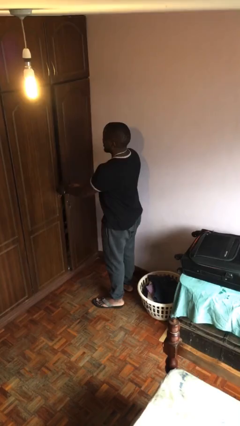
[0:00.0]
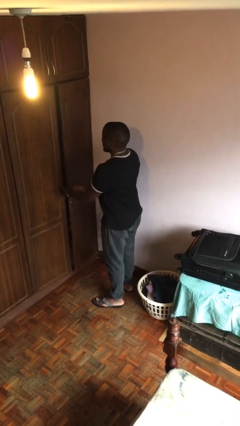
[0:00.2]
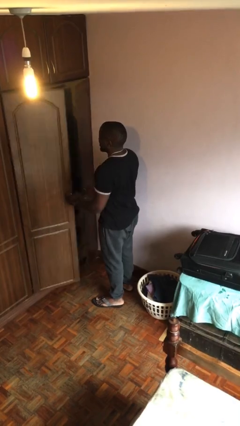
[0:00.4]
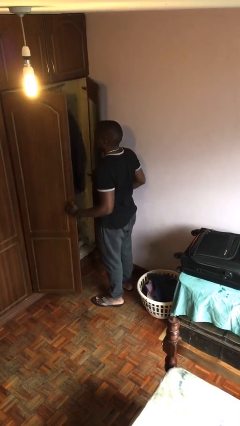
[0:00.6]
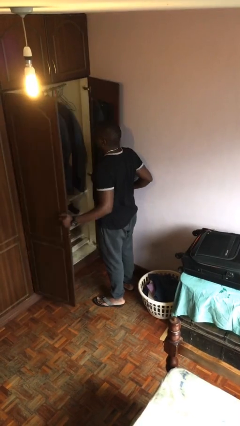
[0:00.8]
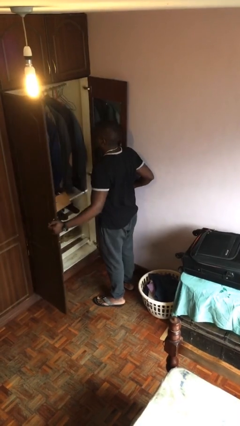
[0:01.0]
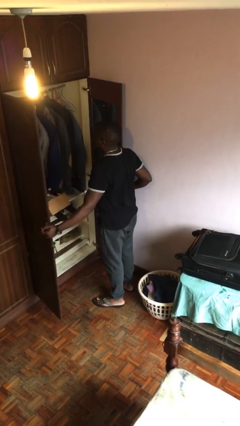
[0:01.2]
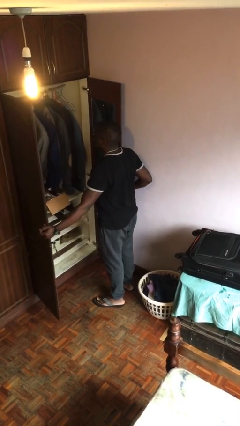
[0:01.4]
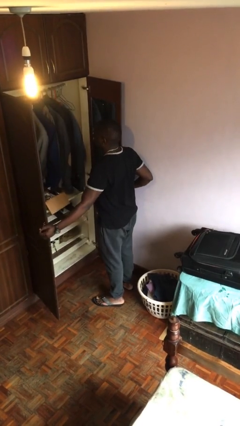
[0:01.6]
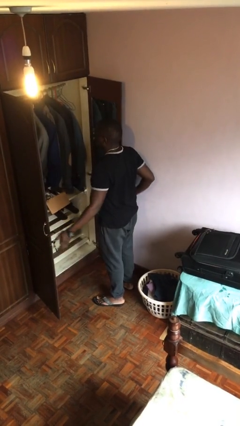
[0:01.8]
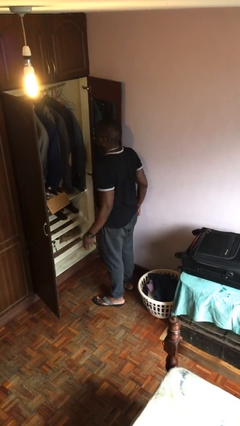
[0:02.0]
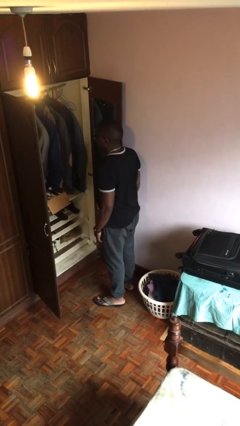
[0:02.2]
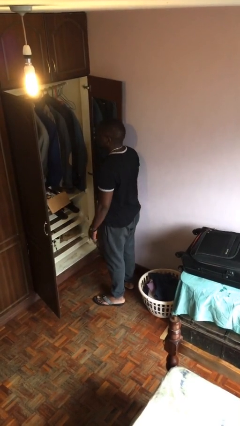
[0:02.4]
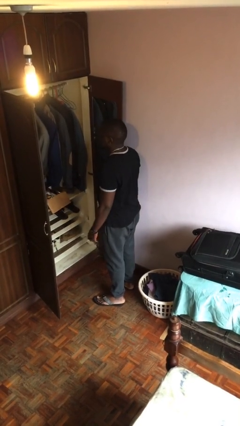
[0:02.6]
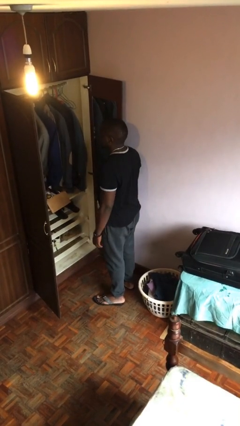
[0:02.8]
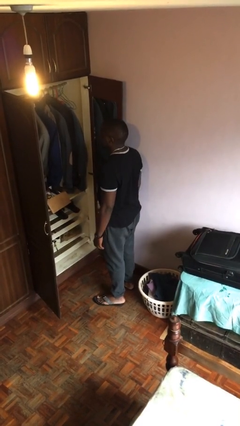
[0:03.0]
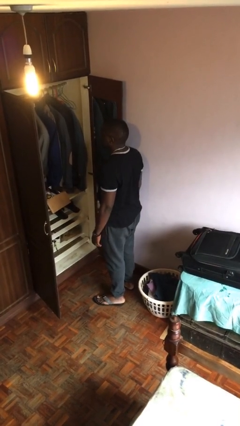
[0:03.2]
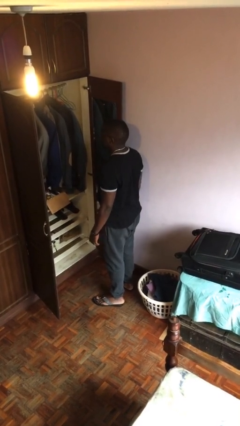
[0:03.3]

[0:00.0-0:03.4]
person opens closet door

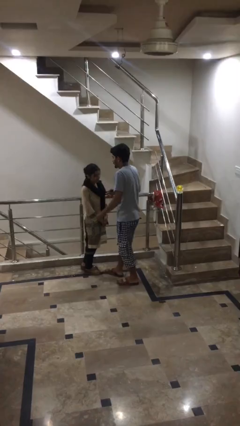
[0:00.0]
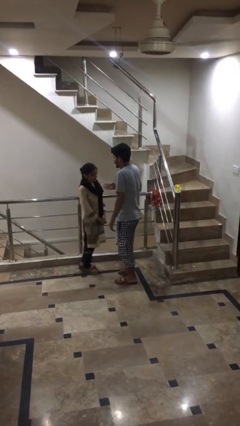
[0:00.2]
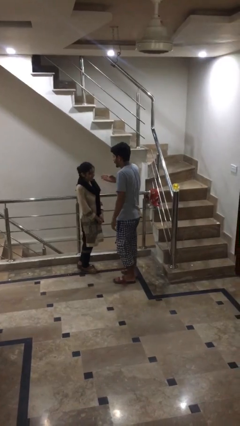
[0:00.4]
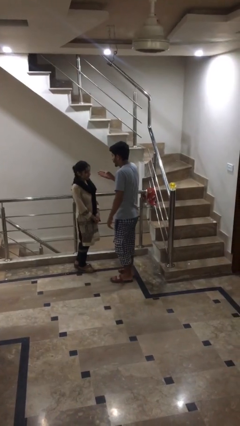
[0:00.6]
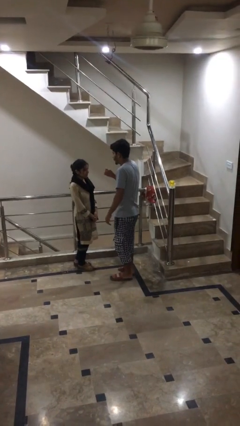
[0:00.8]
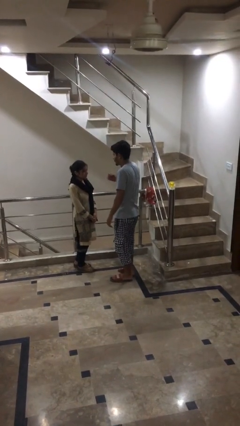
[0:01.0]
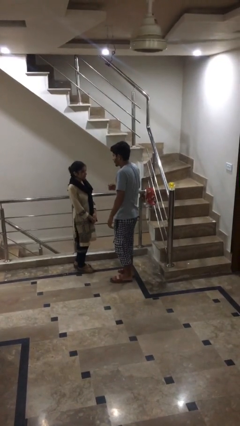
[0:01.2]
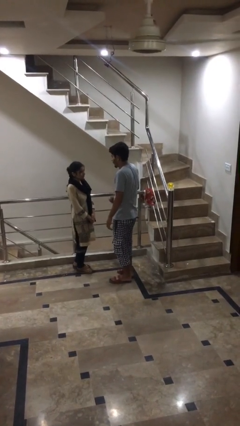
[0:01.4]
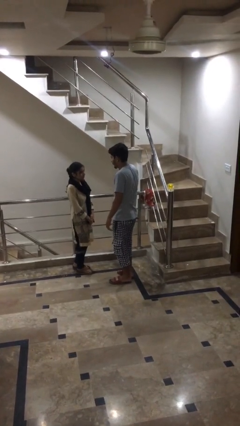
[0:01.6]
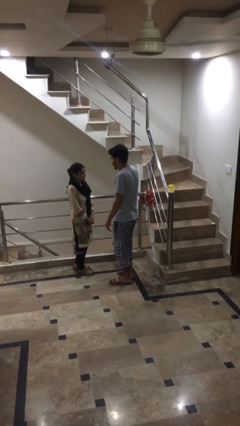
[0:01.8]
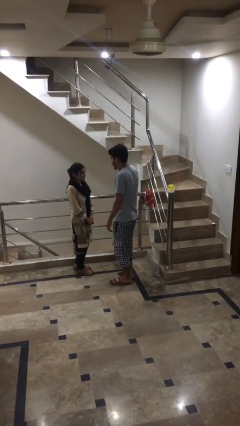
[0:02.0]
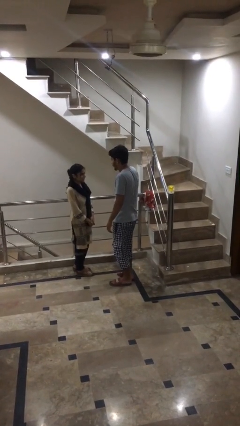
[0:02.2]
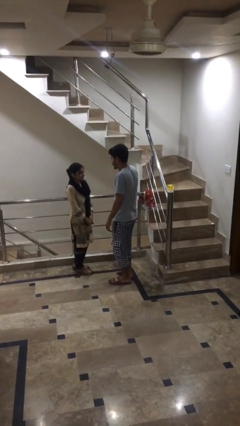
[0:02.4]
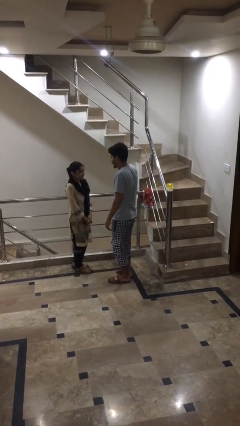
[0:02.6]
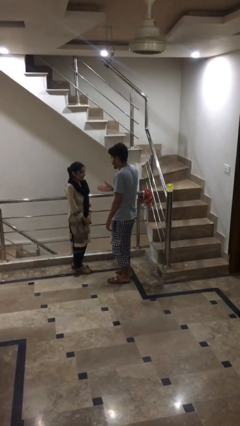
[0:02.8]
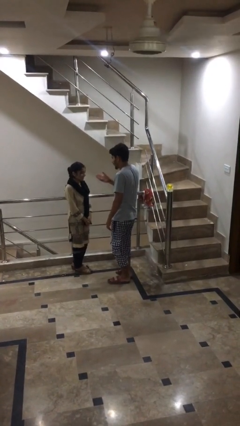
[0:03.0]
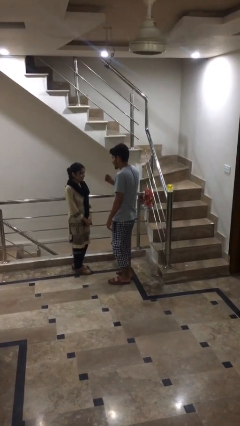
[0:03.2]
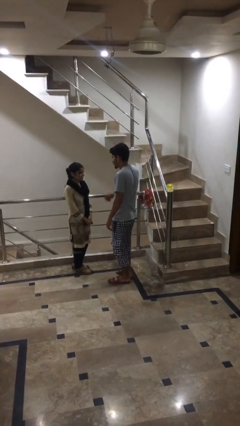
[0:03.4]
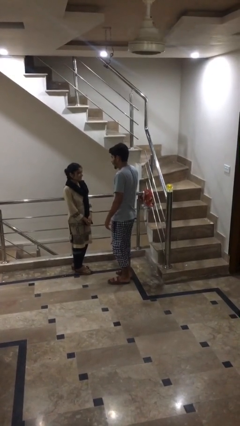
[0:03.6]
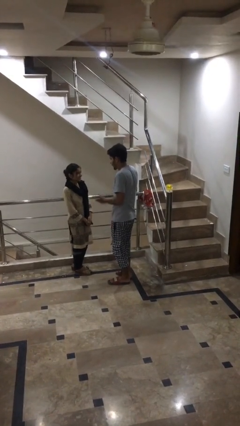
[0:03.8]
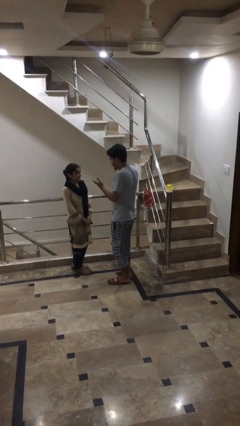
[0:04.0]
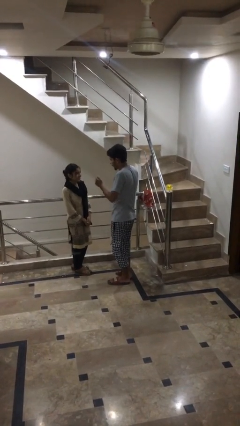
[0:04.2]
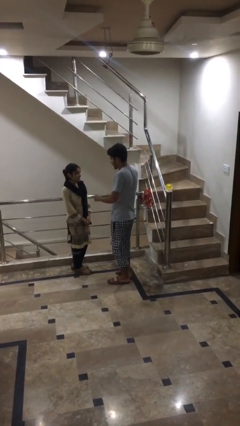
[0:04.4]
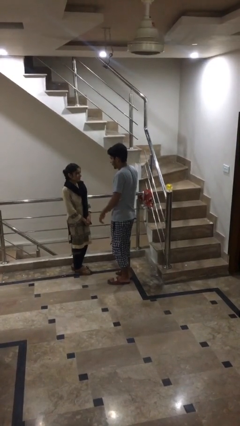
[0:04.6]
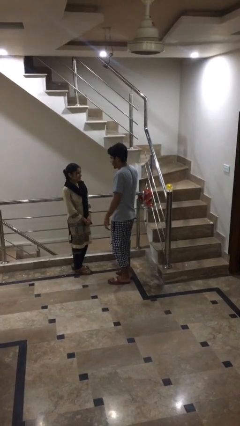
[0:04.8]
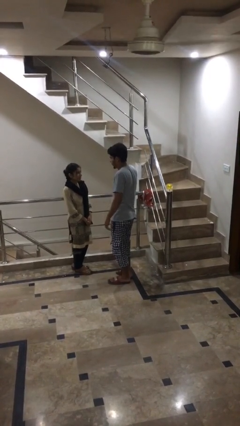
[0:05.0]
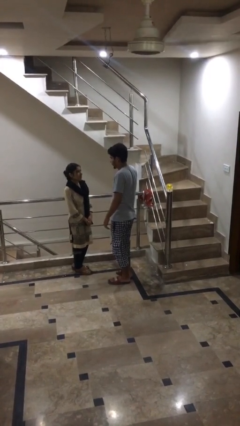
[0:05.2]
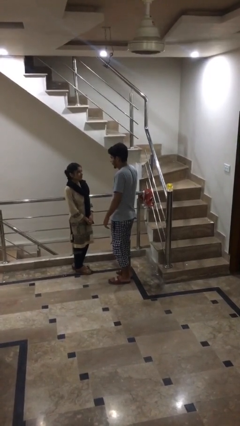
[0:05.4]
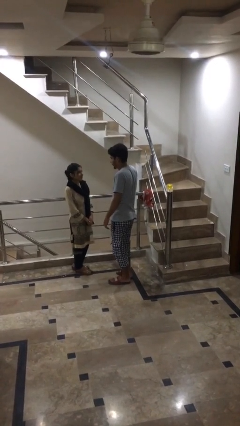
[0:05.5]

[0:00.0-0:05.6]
person talks to person

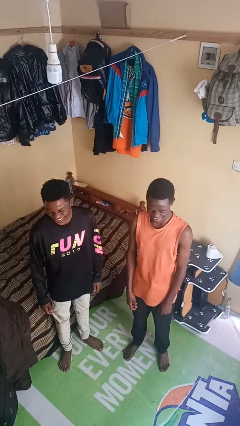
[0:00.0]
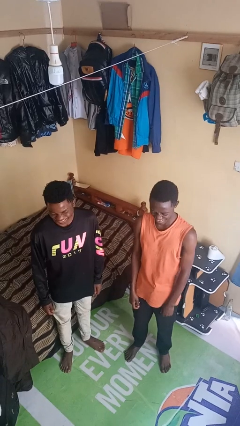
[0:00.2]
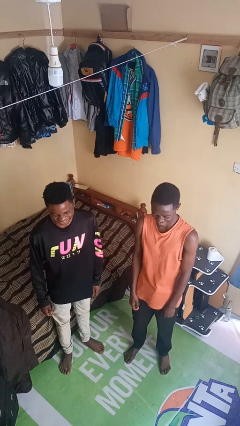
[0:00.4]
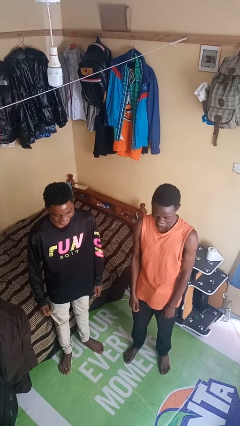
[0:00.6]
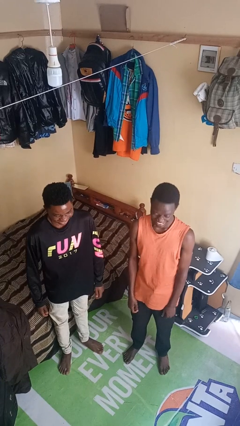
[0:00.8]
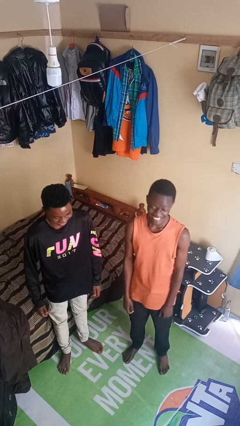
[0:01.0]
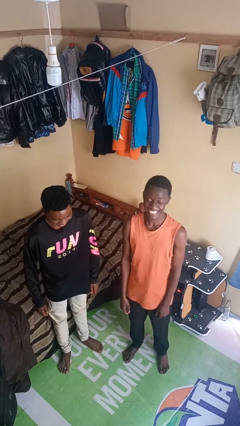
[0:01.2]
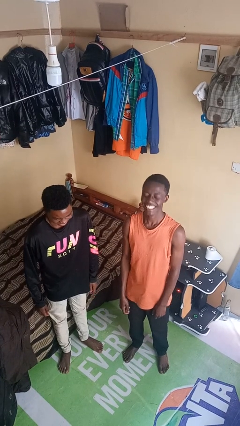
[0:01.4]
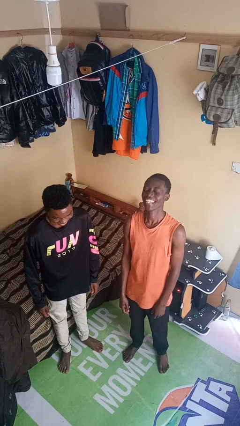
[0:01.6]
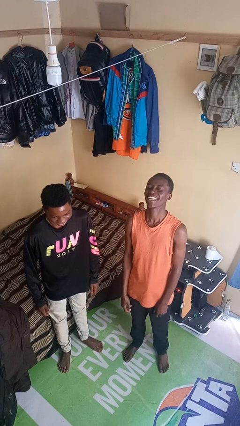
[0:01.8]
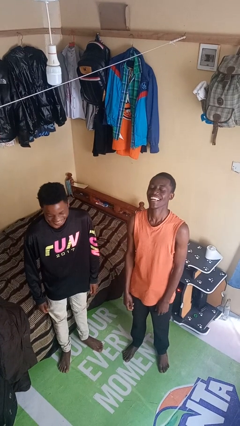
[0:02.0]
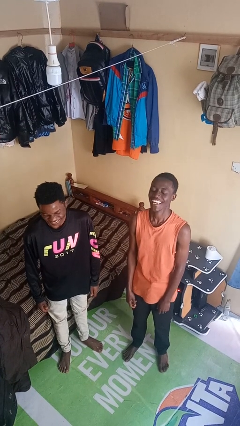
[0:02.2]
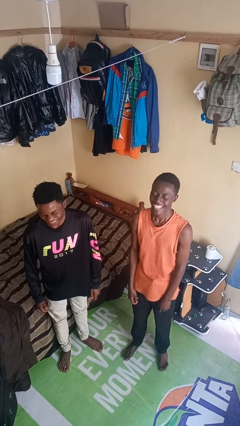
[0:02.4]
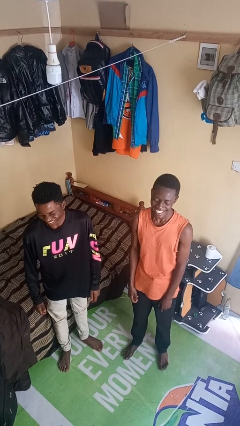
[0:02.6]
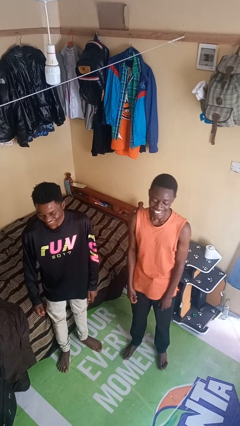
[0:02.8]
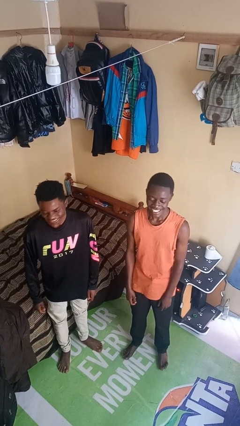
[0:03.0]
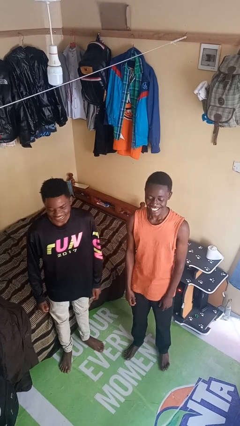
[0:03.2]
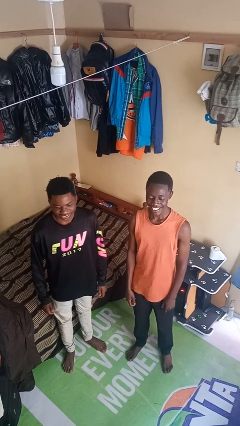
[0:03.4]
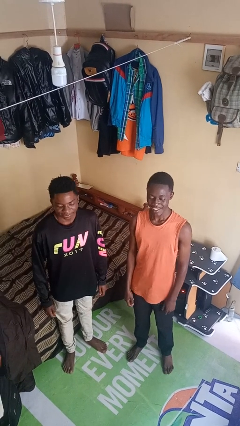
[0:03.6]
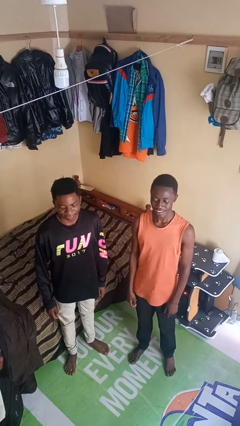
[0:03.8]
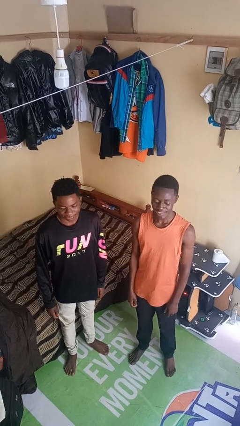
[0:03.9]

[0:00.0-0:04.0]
person laughs with person

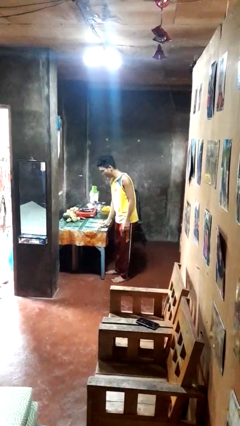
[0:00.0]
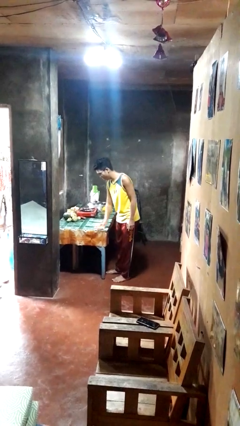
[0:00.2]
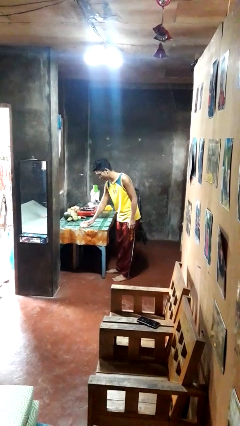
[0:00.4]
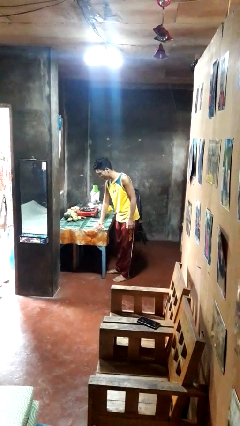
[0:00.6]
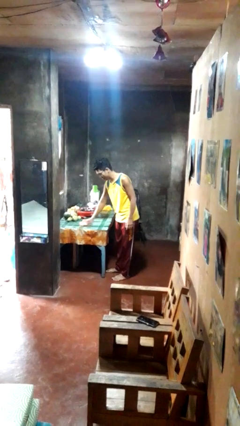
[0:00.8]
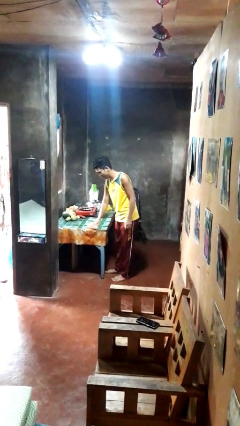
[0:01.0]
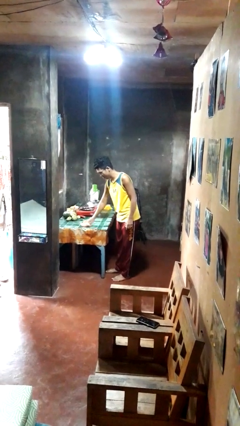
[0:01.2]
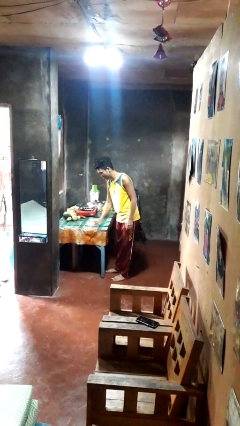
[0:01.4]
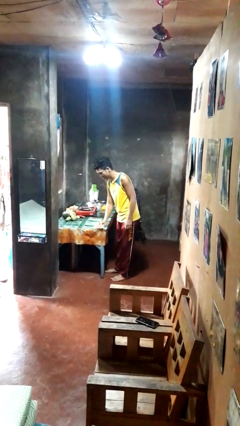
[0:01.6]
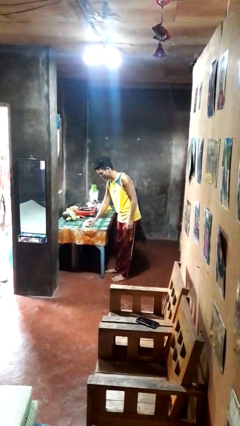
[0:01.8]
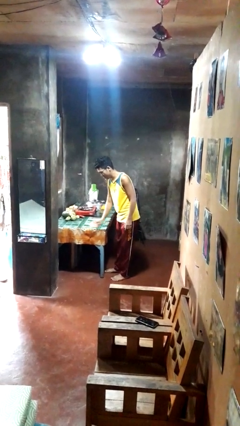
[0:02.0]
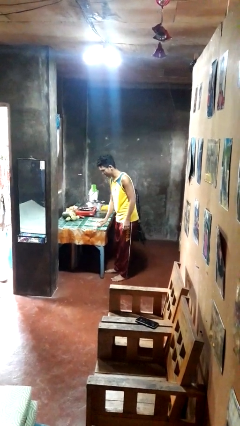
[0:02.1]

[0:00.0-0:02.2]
person cleans table with rag

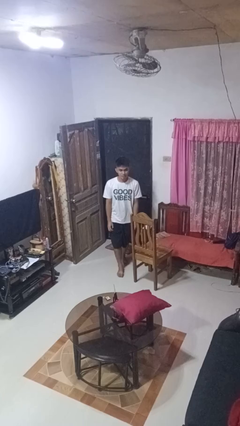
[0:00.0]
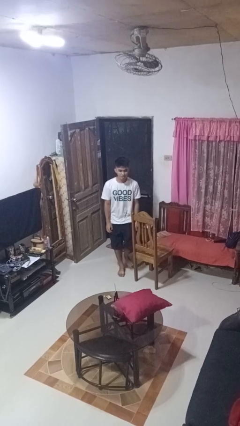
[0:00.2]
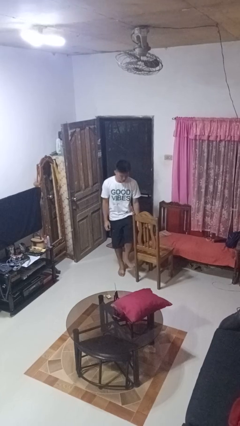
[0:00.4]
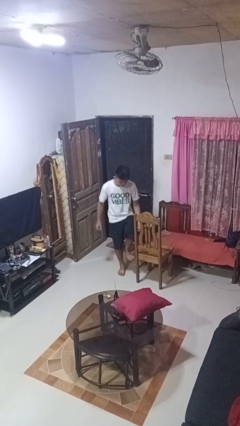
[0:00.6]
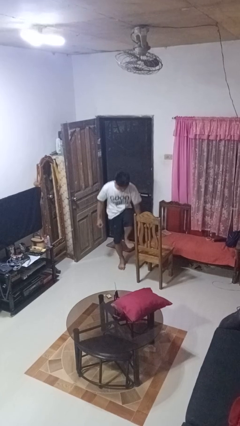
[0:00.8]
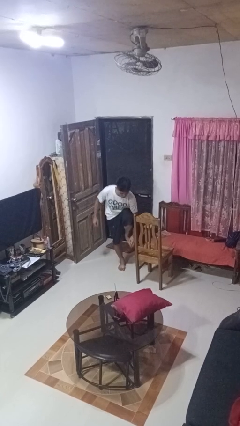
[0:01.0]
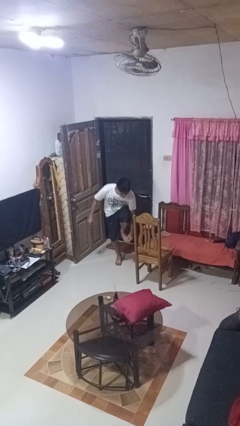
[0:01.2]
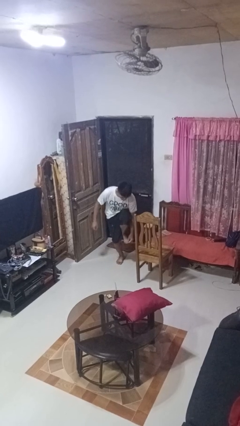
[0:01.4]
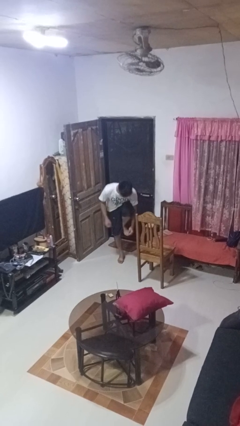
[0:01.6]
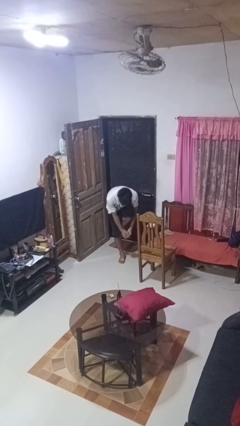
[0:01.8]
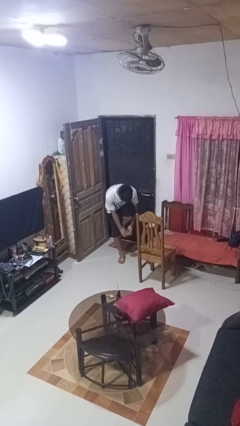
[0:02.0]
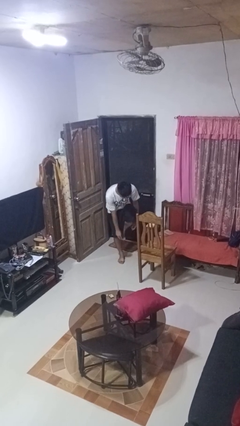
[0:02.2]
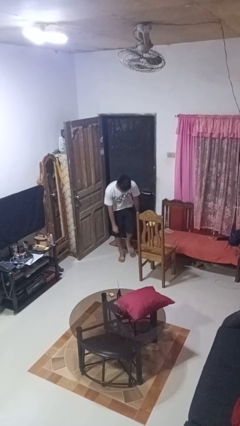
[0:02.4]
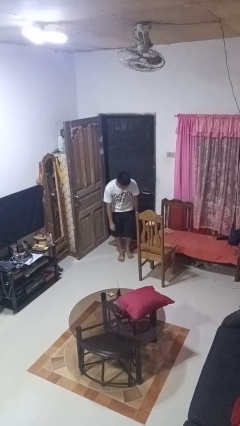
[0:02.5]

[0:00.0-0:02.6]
person stubs toe
